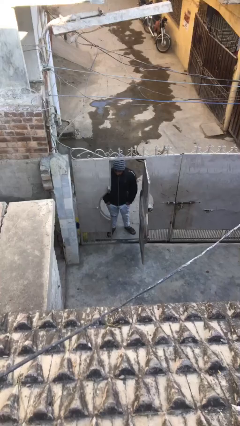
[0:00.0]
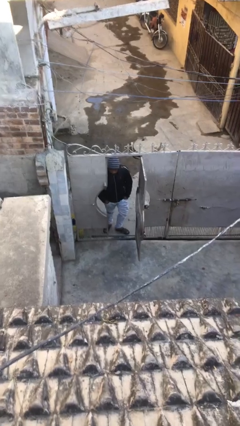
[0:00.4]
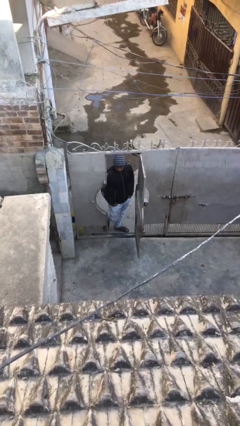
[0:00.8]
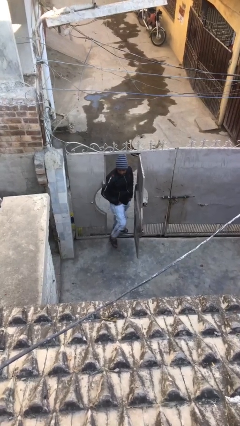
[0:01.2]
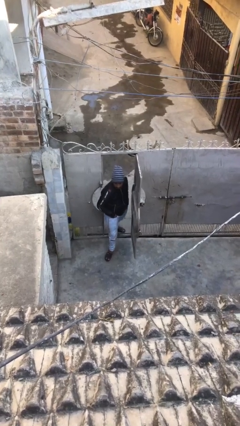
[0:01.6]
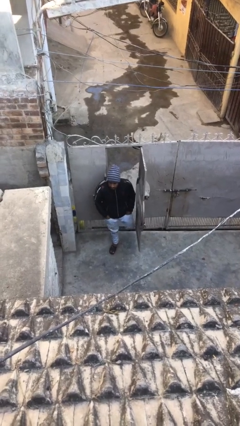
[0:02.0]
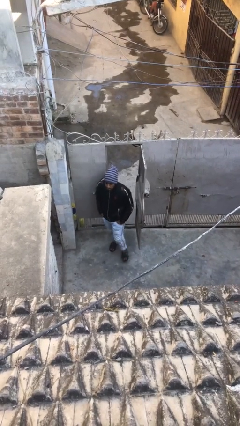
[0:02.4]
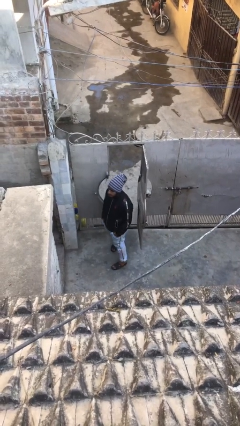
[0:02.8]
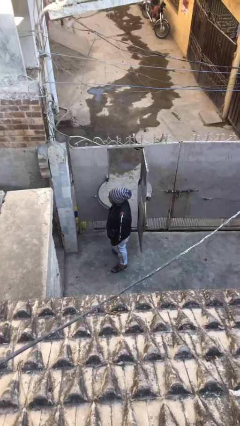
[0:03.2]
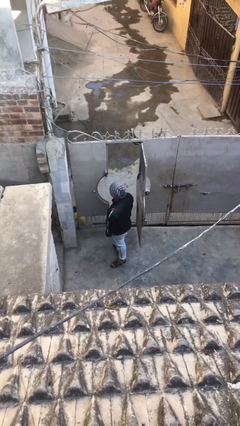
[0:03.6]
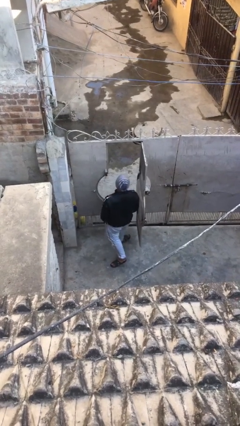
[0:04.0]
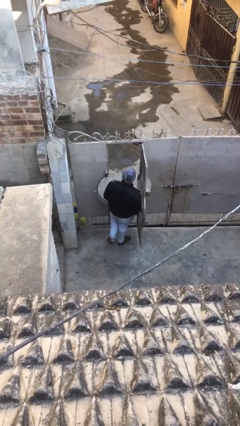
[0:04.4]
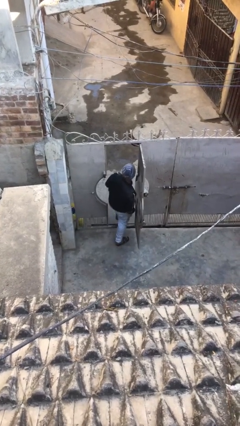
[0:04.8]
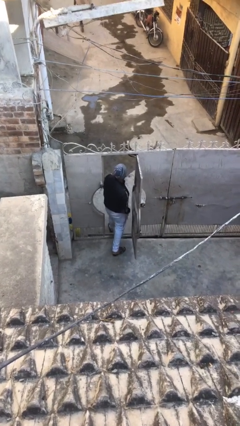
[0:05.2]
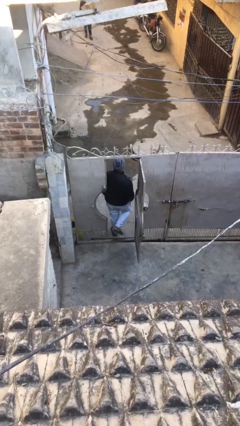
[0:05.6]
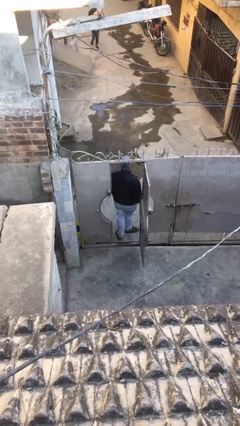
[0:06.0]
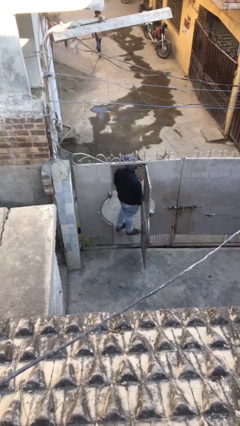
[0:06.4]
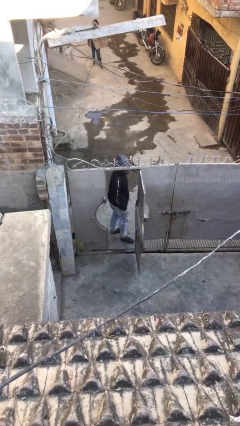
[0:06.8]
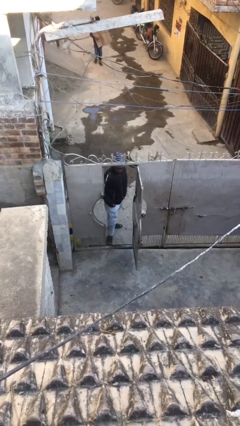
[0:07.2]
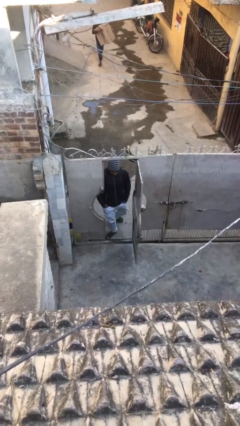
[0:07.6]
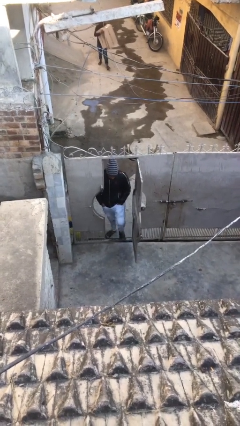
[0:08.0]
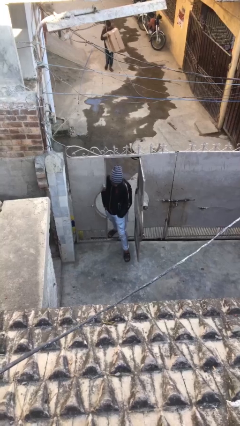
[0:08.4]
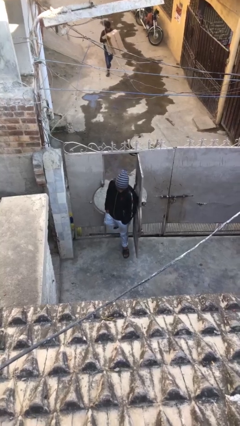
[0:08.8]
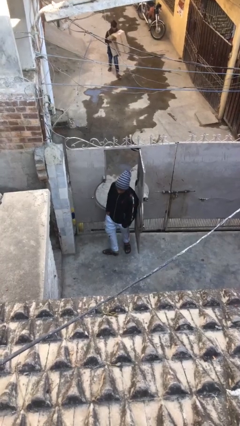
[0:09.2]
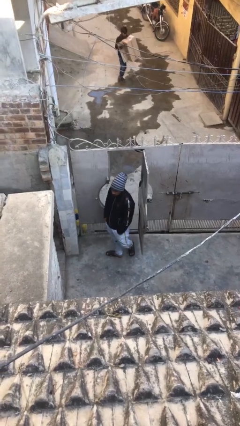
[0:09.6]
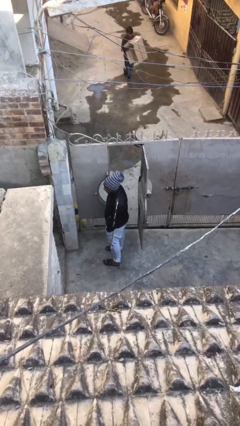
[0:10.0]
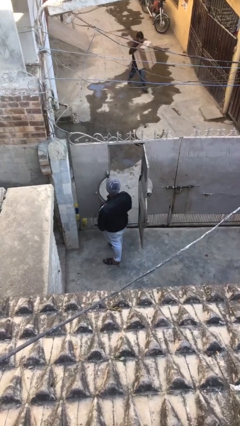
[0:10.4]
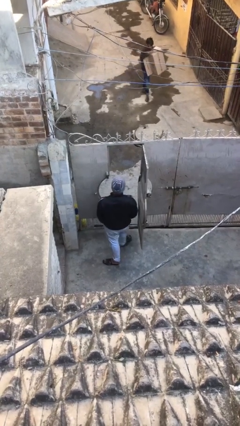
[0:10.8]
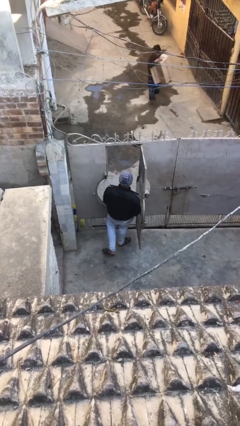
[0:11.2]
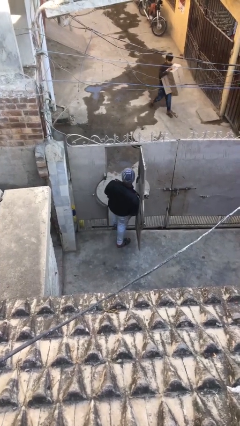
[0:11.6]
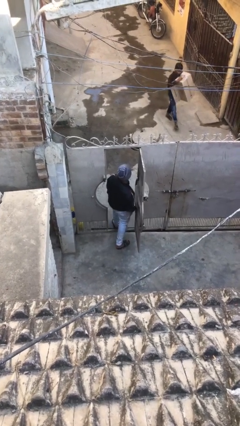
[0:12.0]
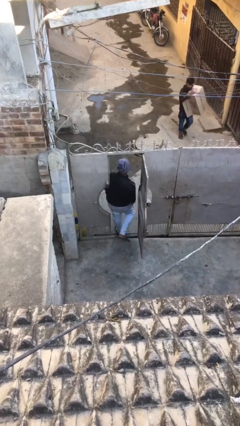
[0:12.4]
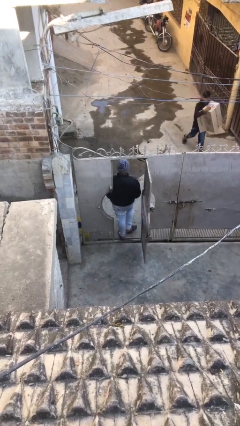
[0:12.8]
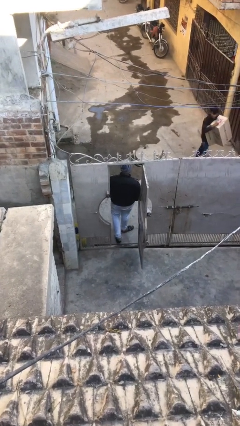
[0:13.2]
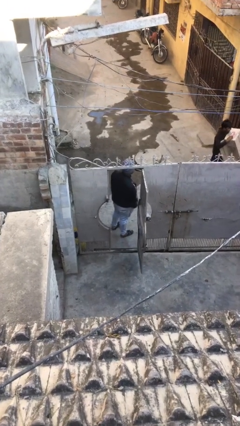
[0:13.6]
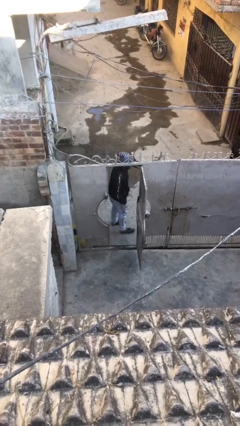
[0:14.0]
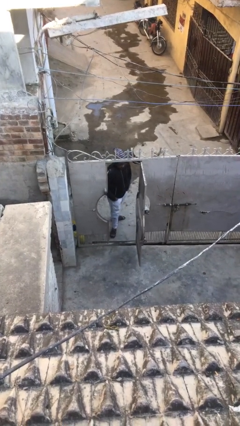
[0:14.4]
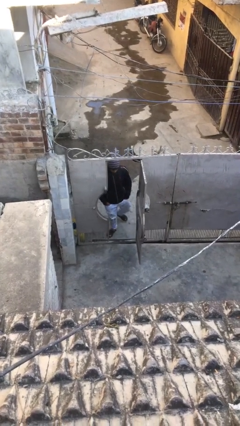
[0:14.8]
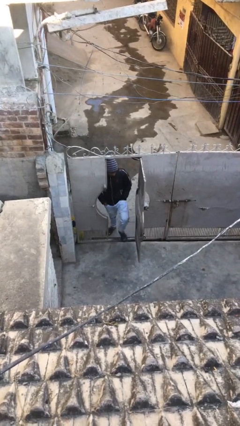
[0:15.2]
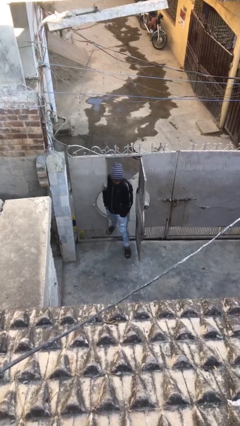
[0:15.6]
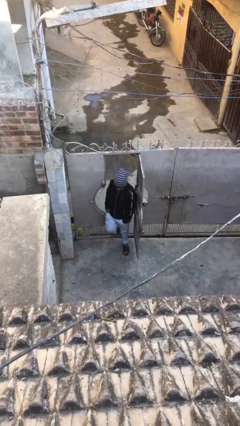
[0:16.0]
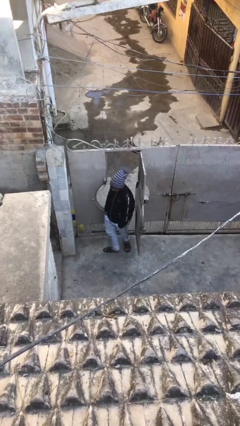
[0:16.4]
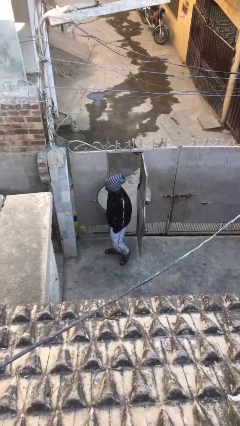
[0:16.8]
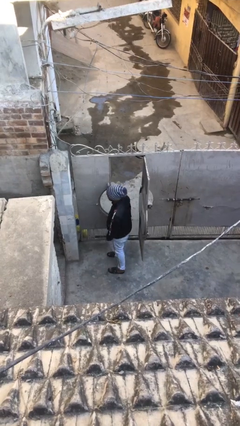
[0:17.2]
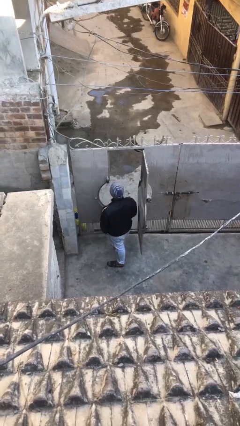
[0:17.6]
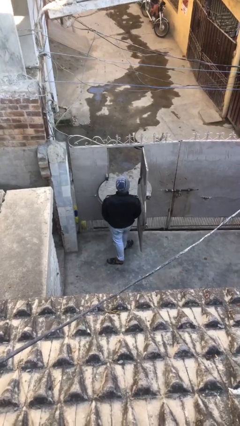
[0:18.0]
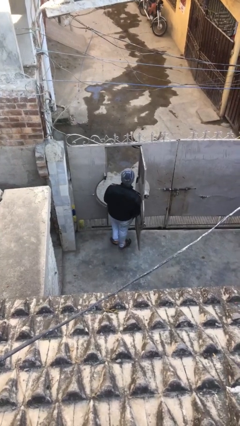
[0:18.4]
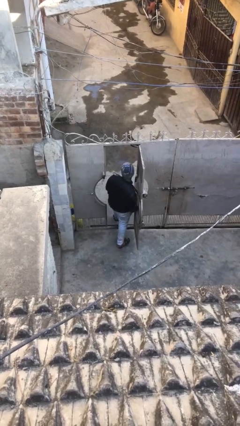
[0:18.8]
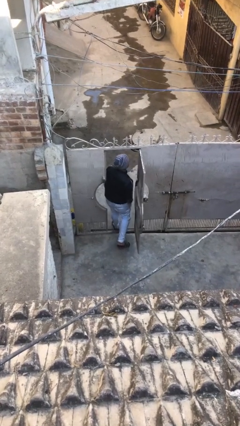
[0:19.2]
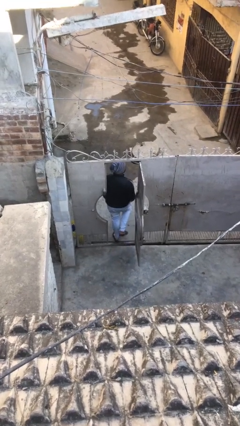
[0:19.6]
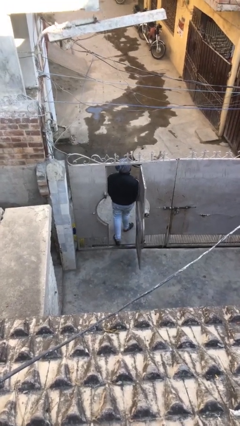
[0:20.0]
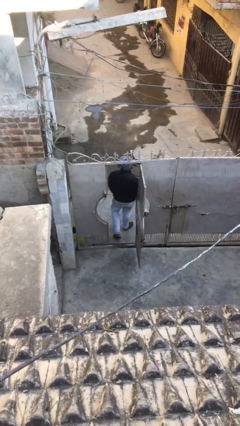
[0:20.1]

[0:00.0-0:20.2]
person texts on phone

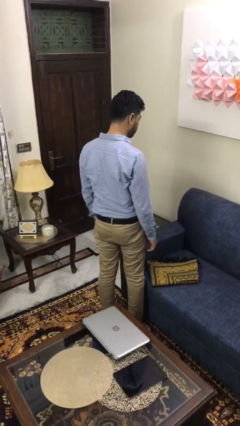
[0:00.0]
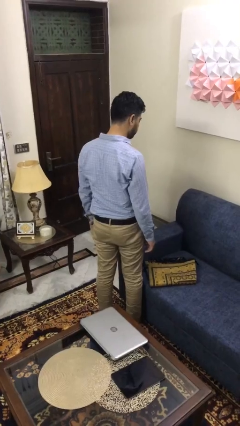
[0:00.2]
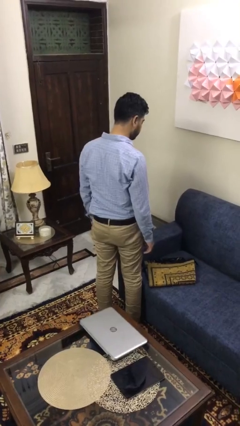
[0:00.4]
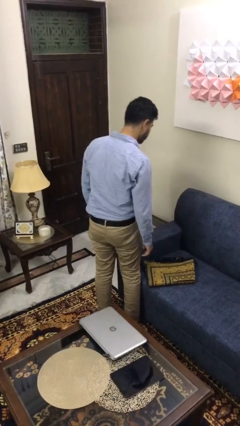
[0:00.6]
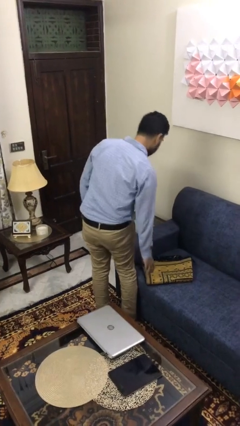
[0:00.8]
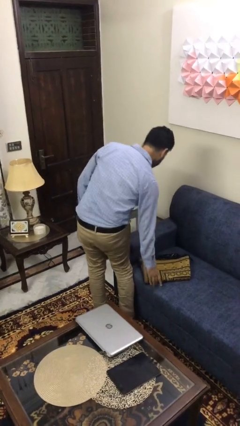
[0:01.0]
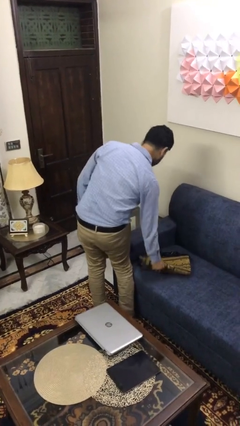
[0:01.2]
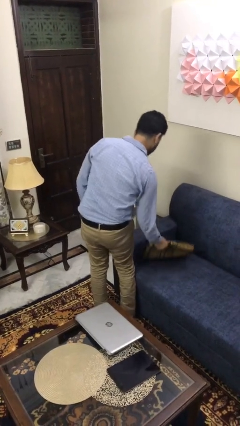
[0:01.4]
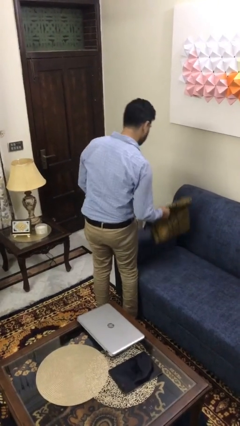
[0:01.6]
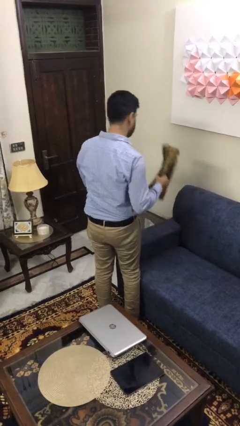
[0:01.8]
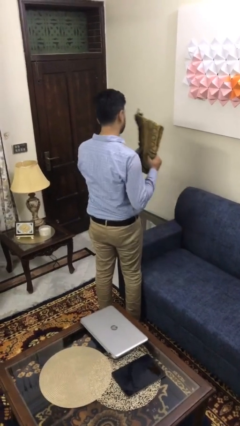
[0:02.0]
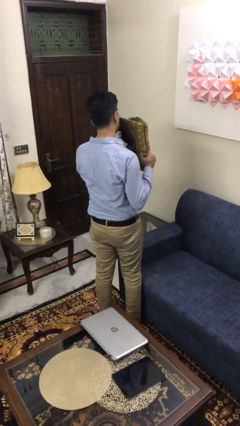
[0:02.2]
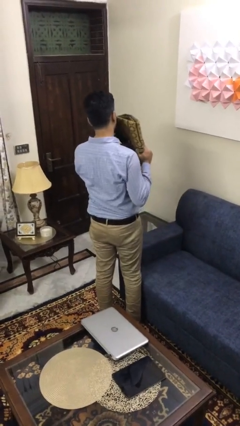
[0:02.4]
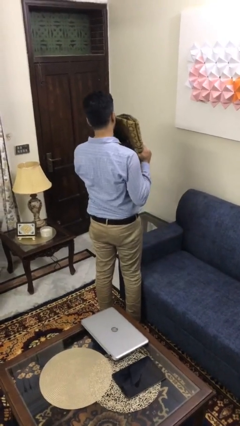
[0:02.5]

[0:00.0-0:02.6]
person picks up object from couch

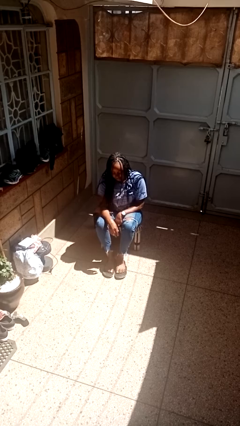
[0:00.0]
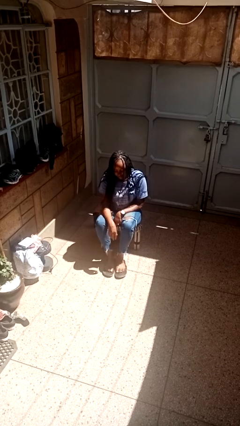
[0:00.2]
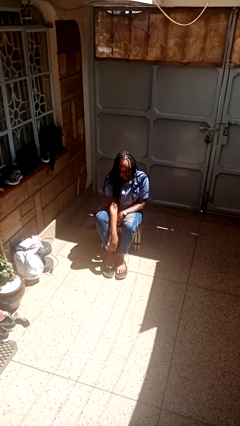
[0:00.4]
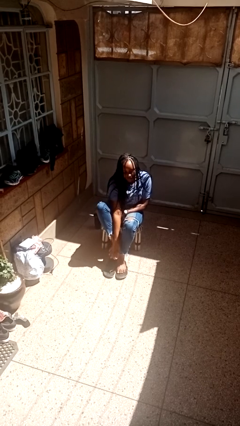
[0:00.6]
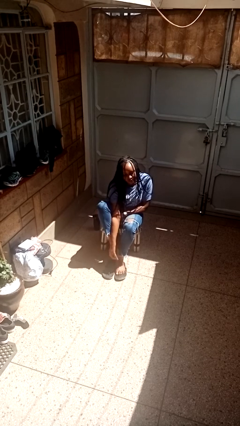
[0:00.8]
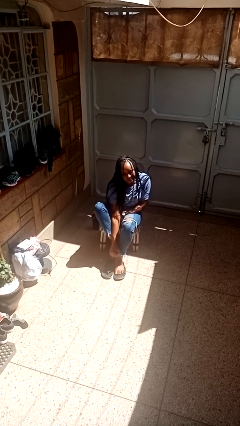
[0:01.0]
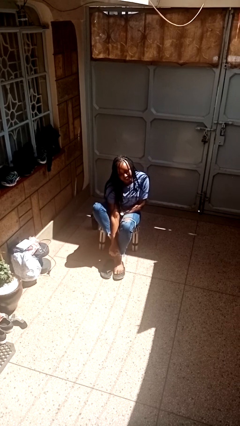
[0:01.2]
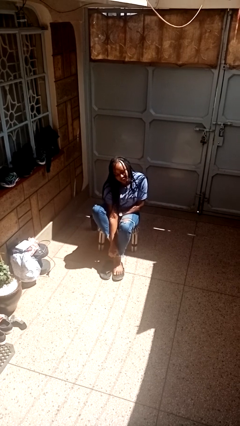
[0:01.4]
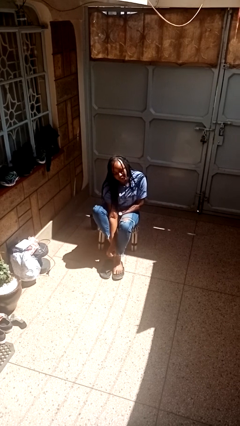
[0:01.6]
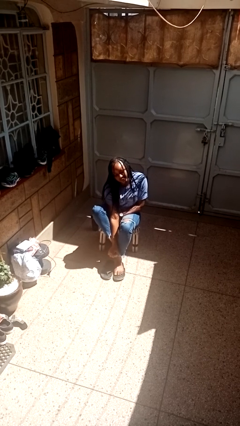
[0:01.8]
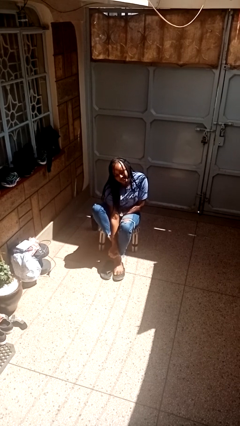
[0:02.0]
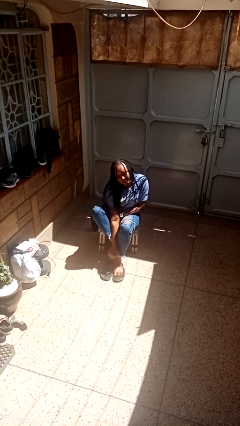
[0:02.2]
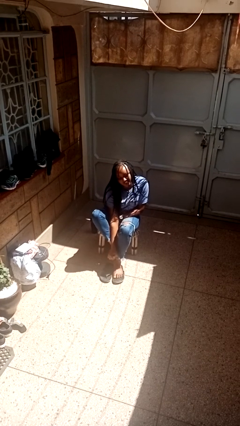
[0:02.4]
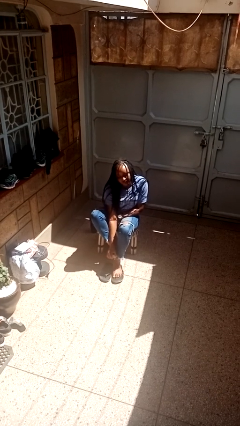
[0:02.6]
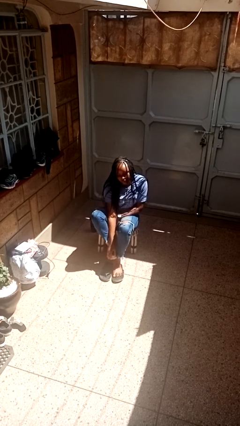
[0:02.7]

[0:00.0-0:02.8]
person rubs foot

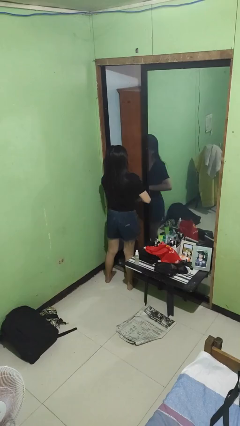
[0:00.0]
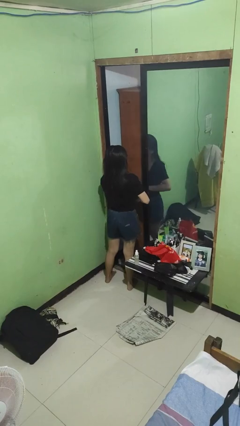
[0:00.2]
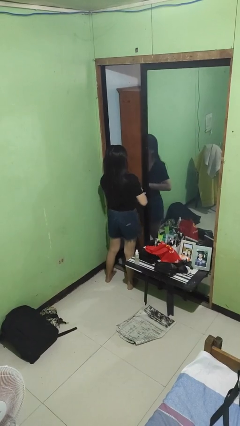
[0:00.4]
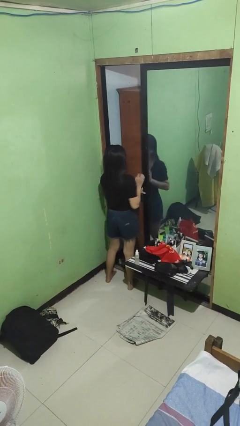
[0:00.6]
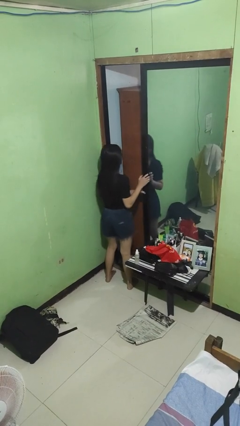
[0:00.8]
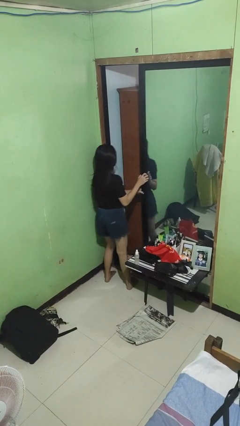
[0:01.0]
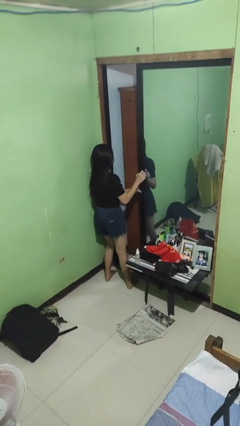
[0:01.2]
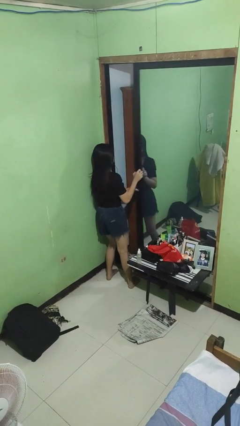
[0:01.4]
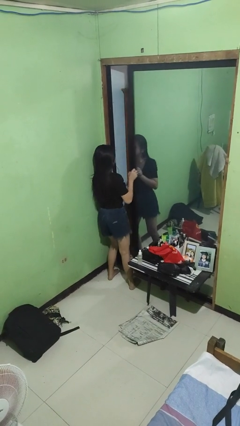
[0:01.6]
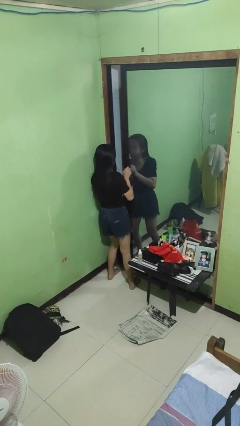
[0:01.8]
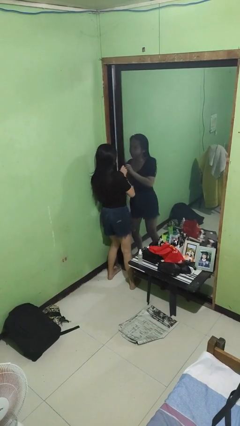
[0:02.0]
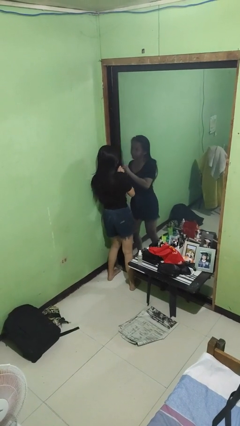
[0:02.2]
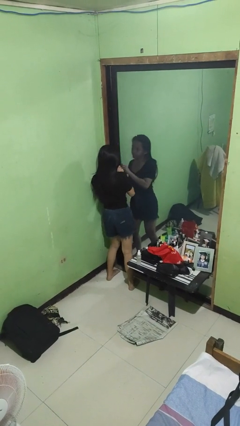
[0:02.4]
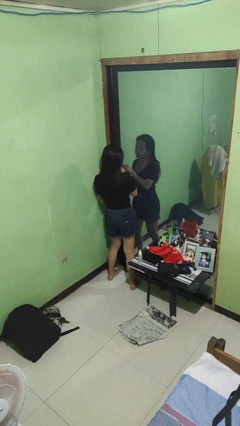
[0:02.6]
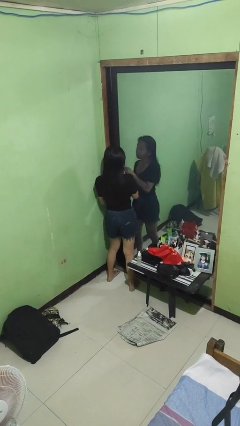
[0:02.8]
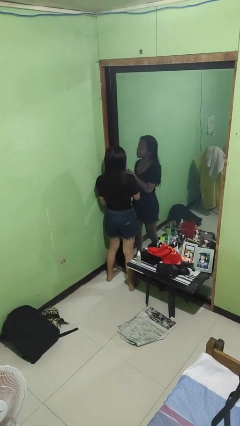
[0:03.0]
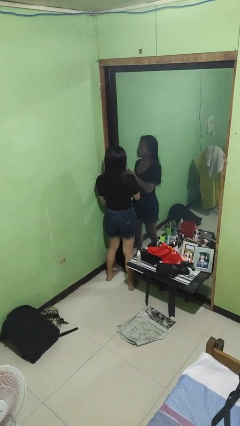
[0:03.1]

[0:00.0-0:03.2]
person closes sliding door
